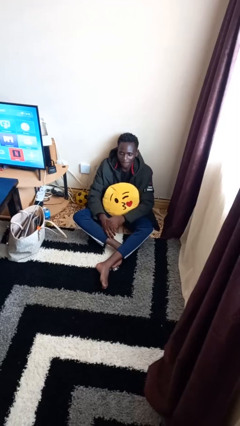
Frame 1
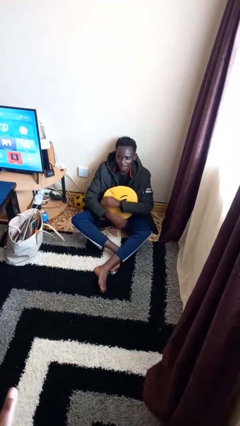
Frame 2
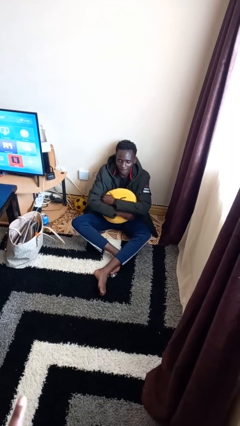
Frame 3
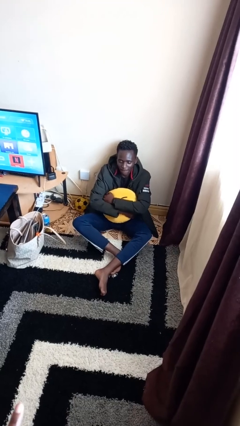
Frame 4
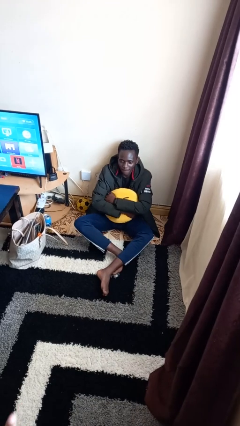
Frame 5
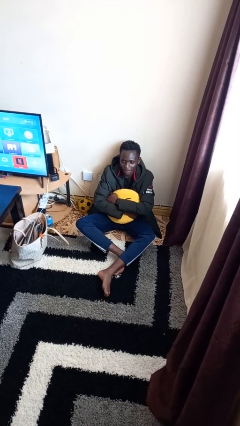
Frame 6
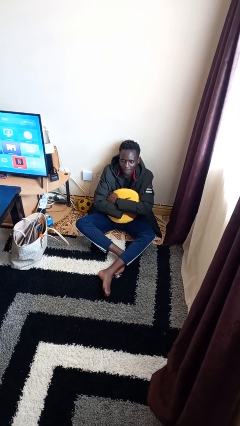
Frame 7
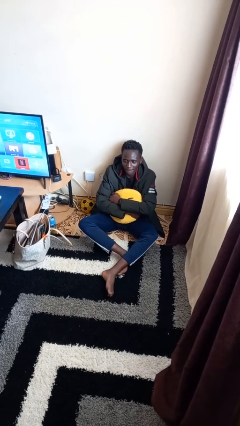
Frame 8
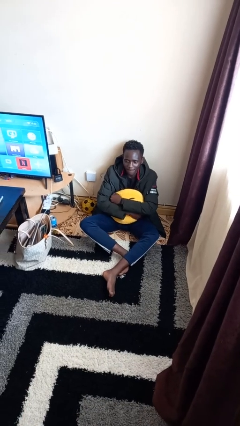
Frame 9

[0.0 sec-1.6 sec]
person hugs stuffed animal

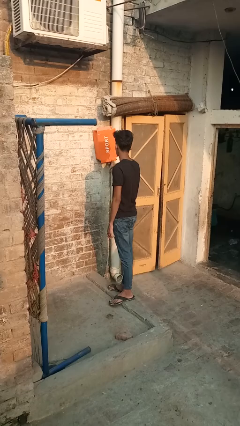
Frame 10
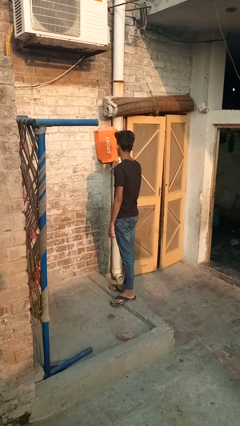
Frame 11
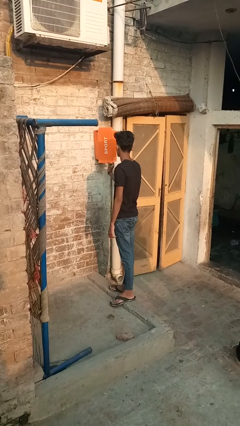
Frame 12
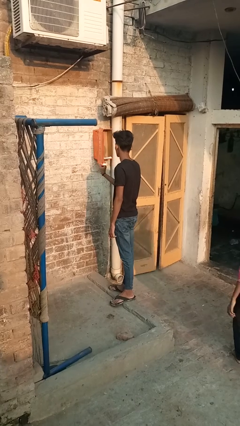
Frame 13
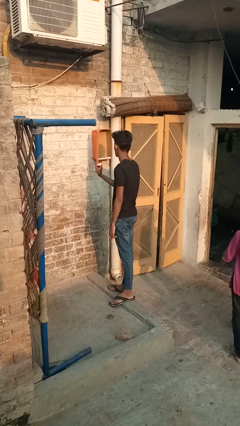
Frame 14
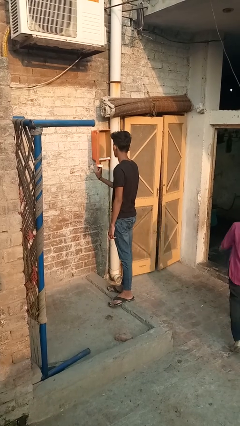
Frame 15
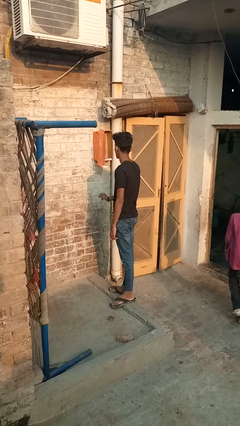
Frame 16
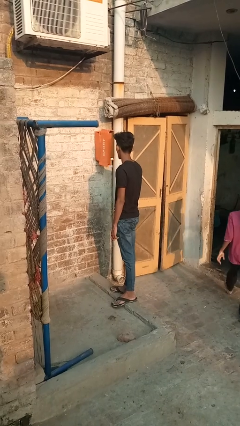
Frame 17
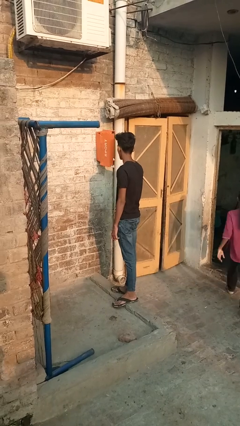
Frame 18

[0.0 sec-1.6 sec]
person closes mailbox

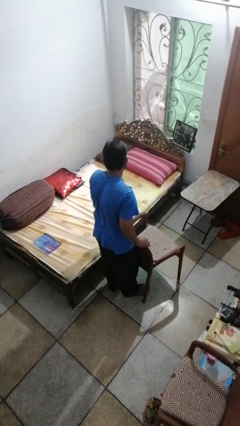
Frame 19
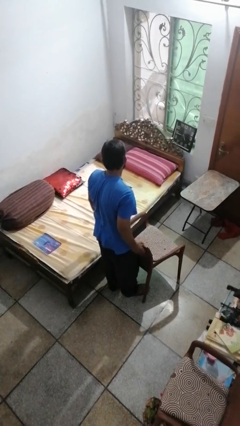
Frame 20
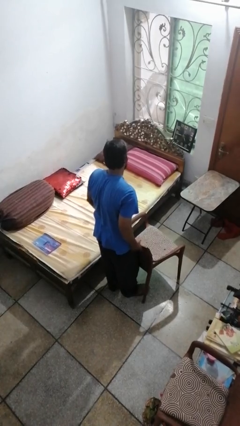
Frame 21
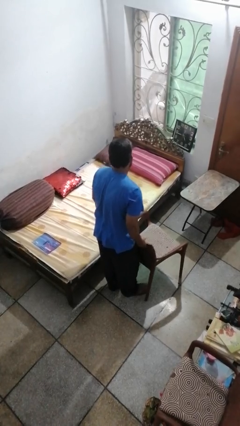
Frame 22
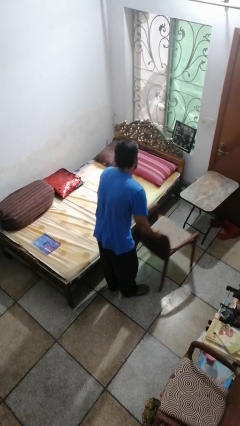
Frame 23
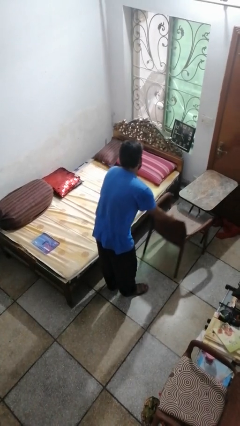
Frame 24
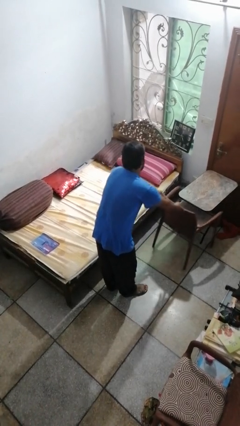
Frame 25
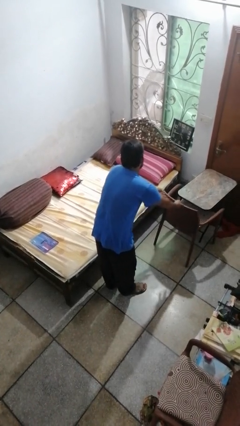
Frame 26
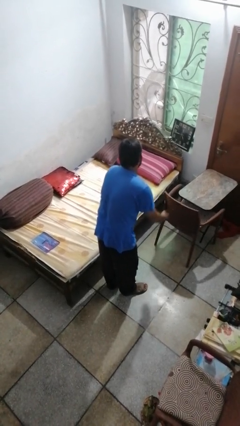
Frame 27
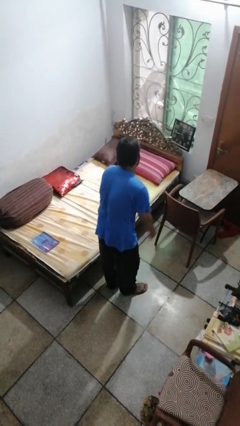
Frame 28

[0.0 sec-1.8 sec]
person pushes in chair

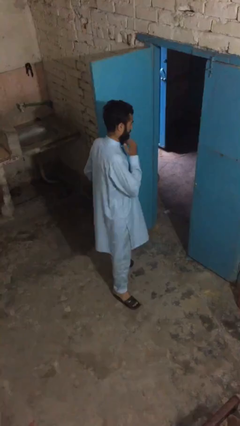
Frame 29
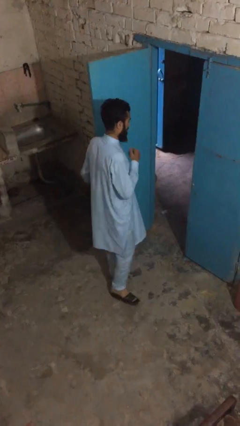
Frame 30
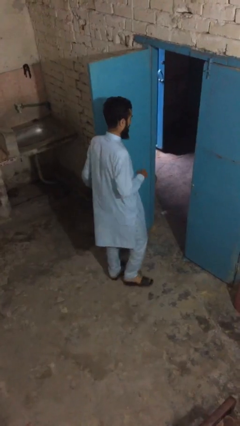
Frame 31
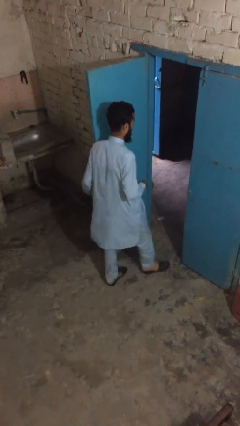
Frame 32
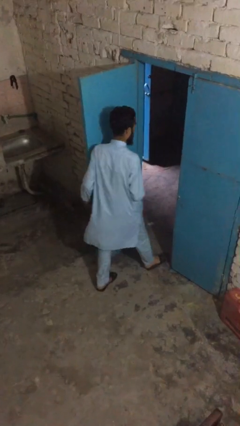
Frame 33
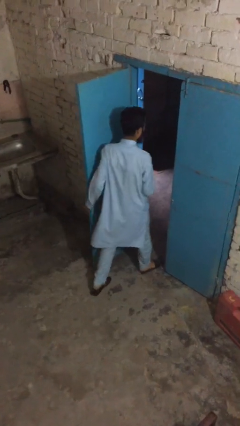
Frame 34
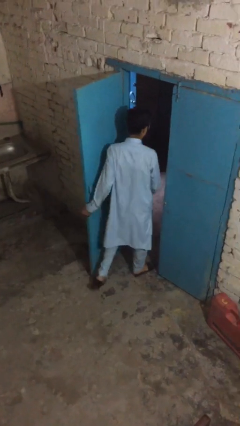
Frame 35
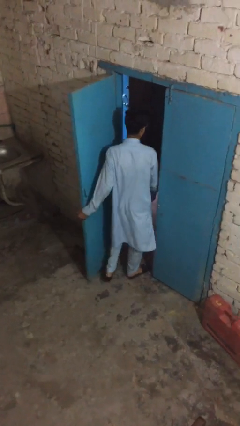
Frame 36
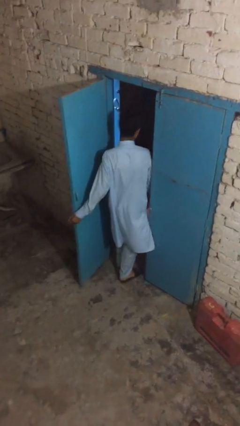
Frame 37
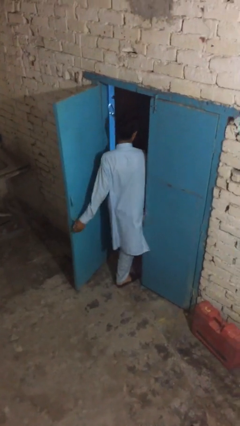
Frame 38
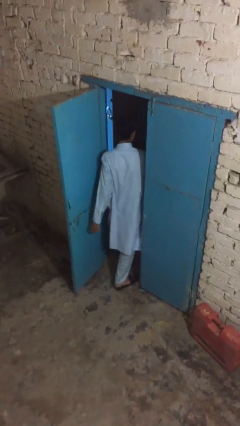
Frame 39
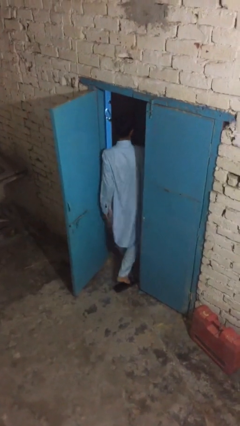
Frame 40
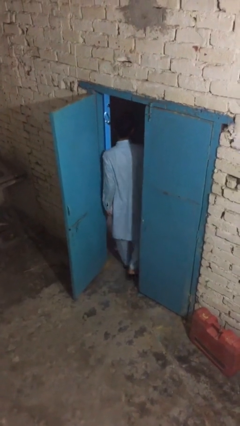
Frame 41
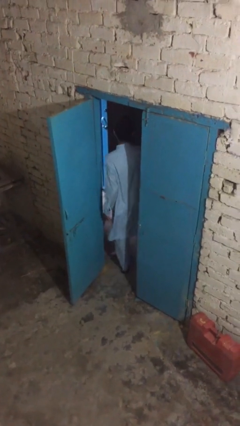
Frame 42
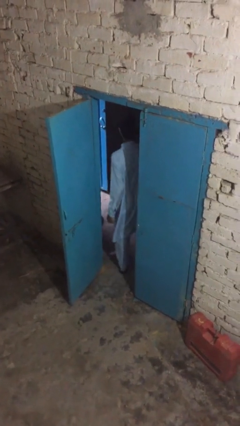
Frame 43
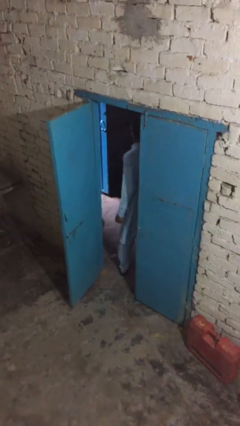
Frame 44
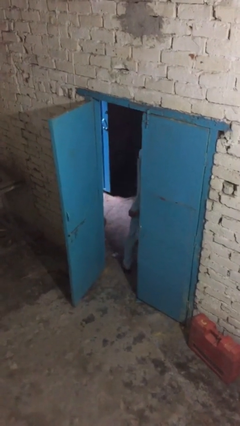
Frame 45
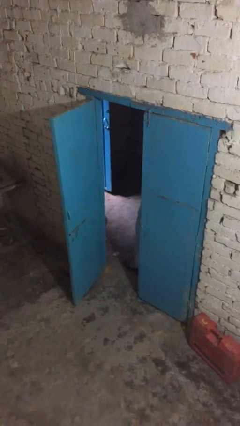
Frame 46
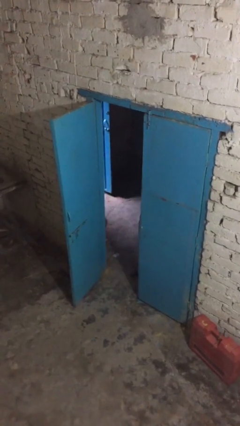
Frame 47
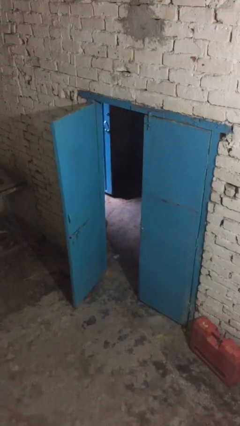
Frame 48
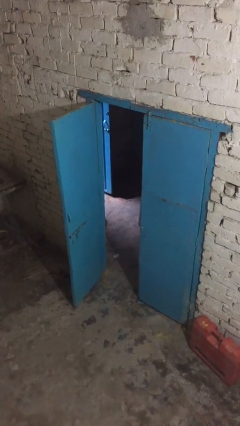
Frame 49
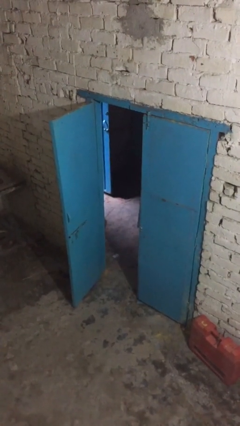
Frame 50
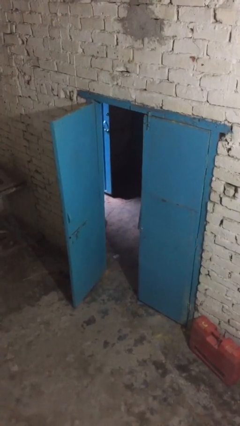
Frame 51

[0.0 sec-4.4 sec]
person exits scene through structure

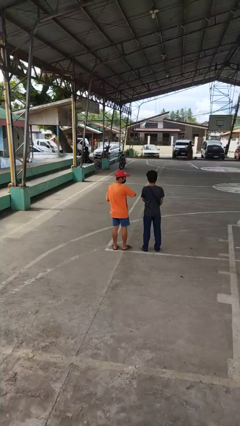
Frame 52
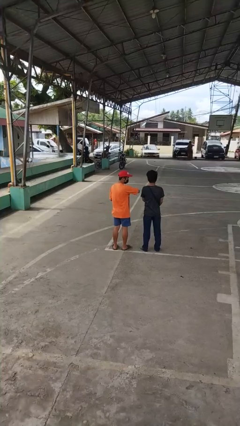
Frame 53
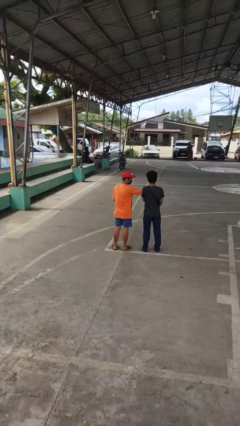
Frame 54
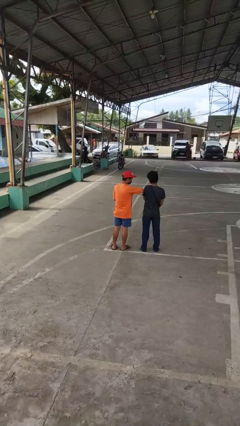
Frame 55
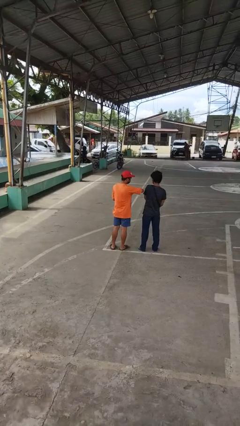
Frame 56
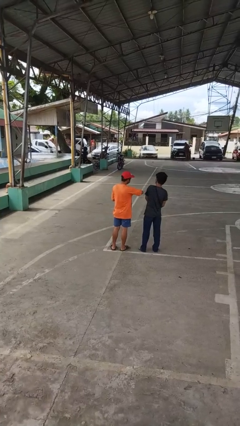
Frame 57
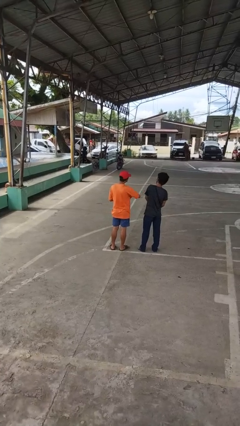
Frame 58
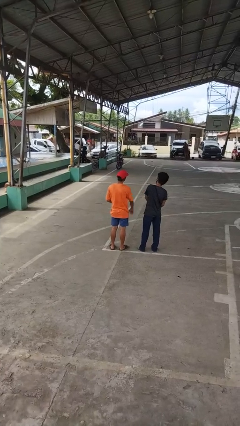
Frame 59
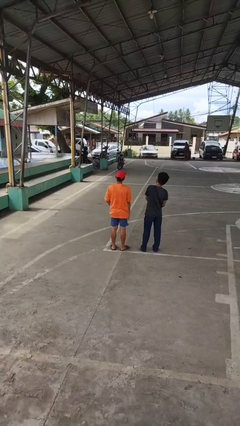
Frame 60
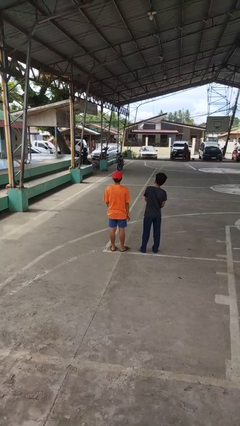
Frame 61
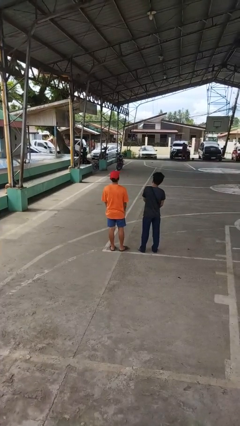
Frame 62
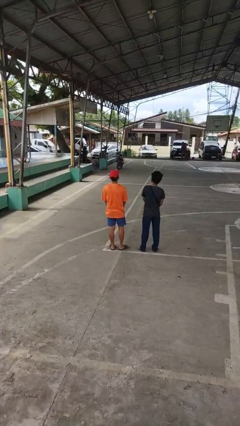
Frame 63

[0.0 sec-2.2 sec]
person nudges person with elbow

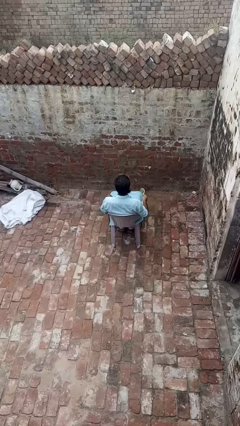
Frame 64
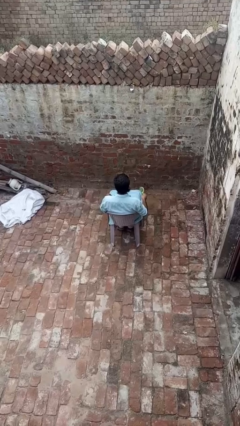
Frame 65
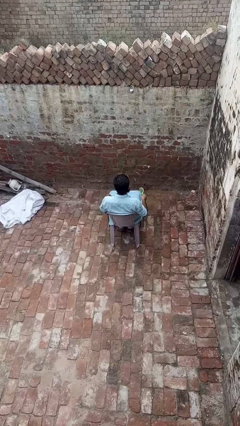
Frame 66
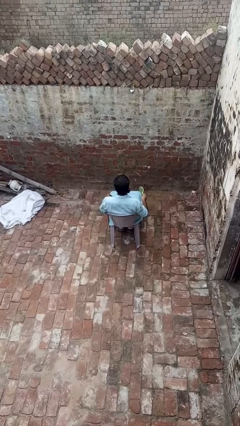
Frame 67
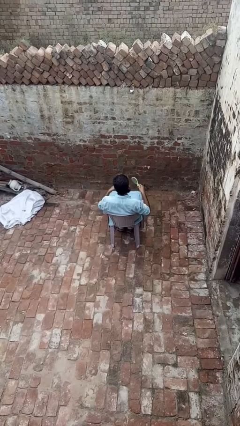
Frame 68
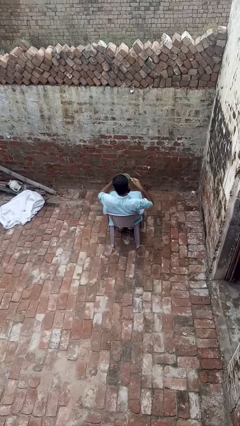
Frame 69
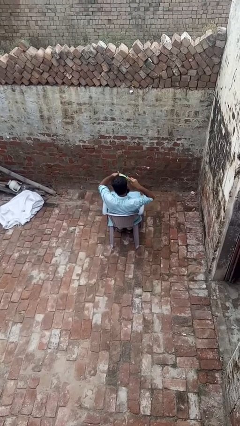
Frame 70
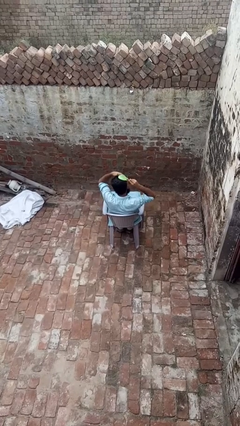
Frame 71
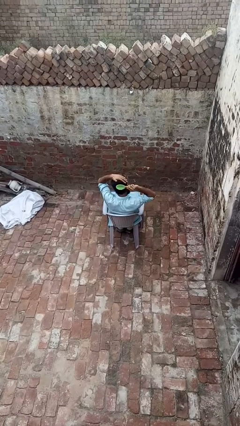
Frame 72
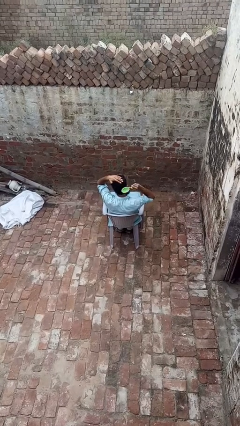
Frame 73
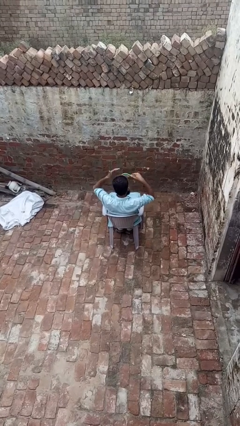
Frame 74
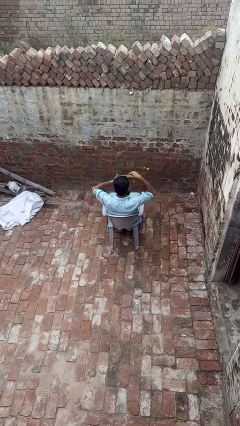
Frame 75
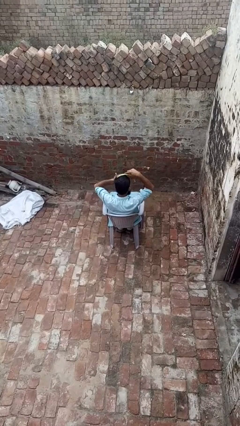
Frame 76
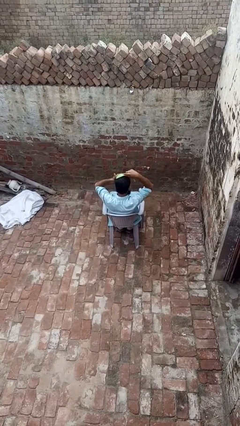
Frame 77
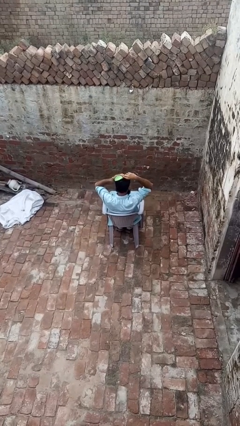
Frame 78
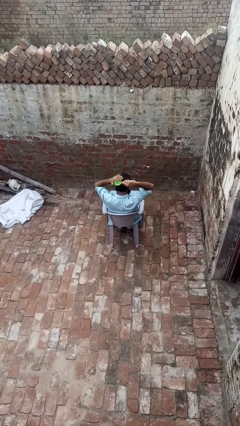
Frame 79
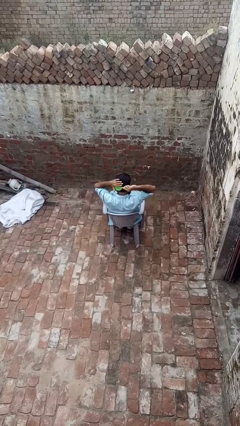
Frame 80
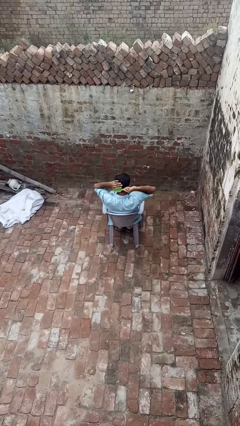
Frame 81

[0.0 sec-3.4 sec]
person brushes hair

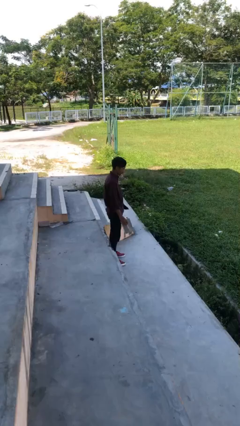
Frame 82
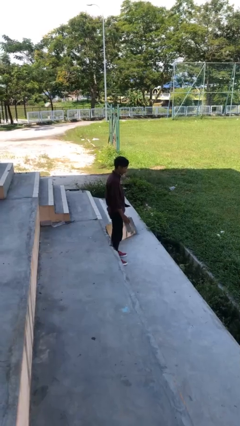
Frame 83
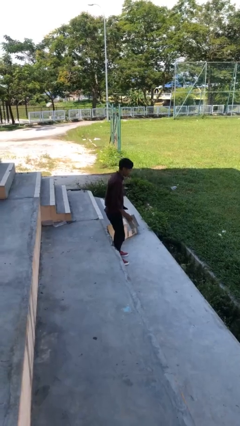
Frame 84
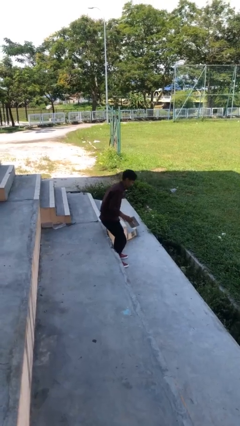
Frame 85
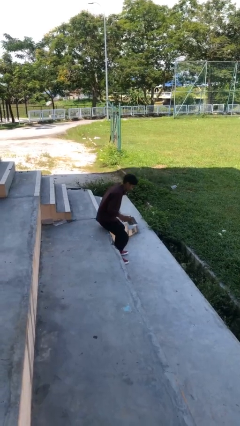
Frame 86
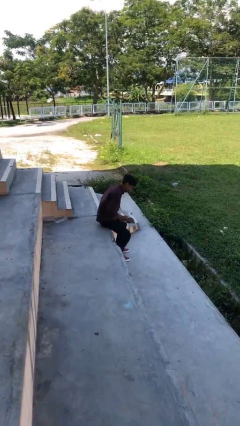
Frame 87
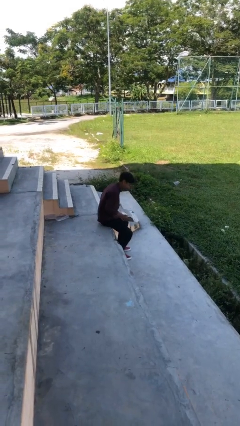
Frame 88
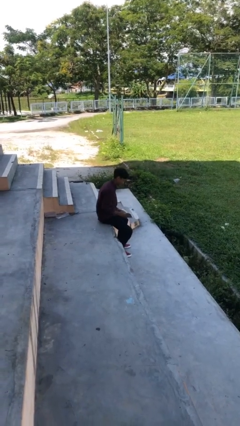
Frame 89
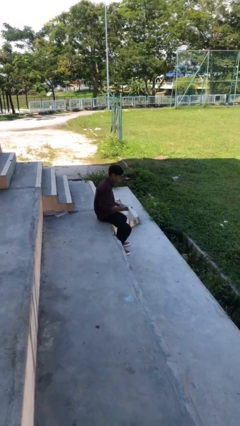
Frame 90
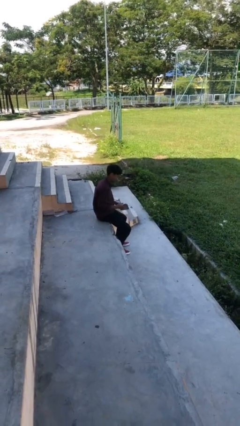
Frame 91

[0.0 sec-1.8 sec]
person sits down

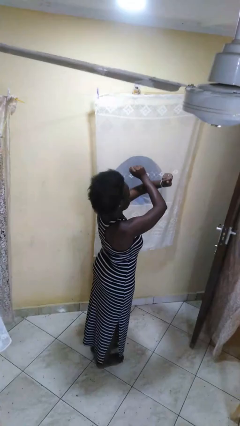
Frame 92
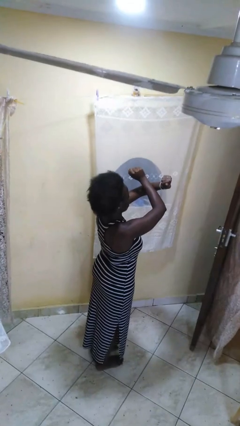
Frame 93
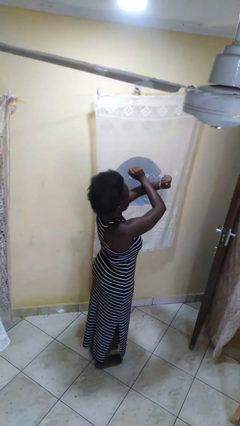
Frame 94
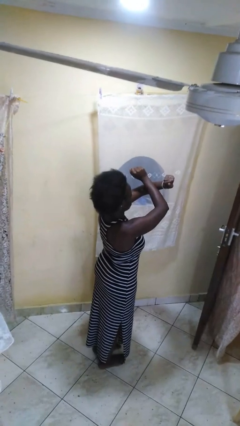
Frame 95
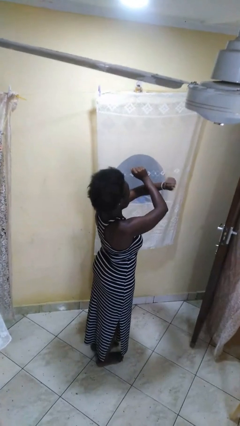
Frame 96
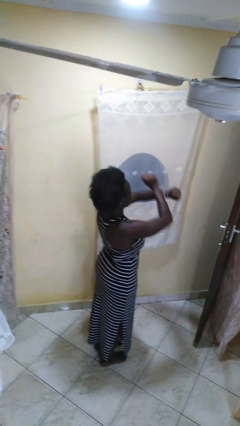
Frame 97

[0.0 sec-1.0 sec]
person gestures arms x
